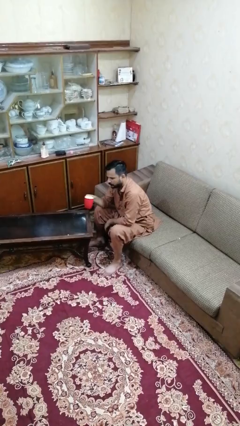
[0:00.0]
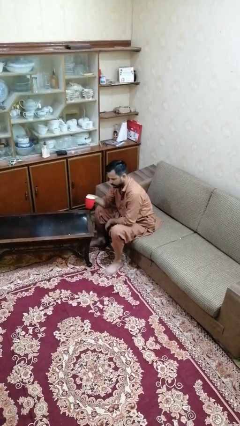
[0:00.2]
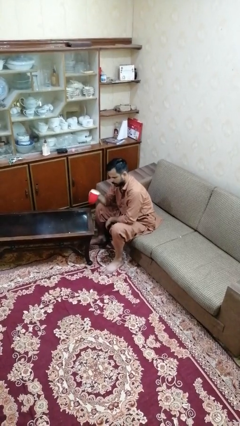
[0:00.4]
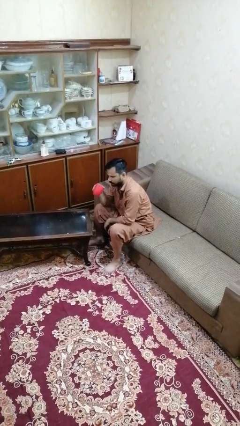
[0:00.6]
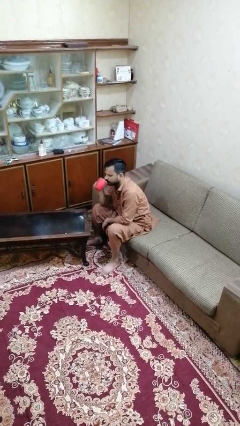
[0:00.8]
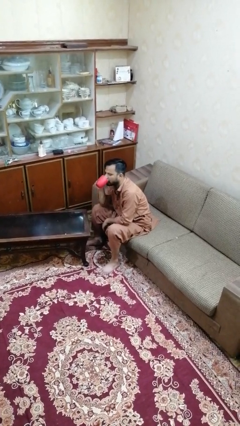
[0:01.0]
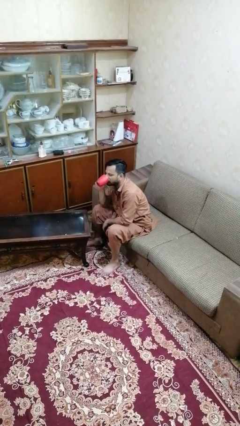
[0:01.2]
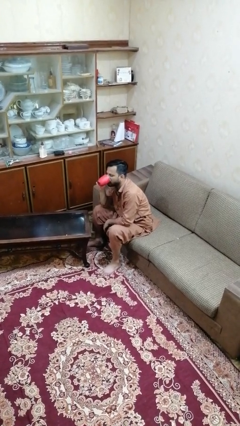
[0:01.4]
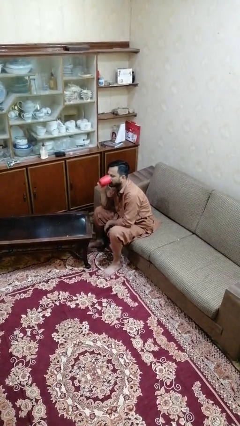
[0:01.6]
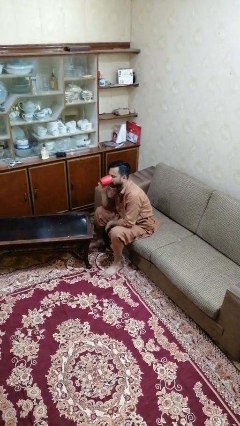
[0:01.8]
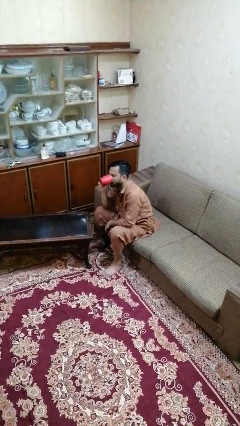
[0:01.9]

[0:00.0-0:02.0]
person drinks from mug

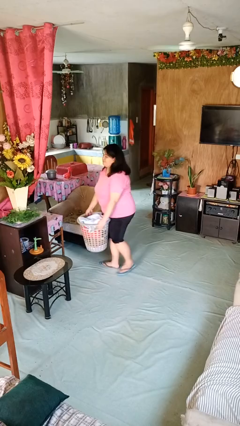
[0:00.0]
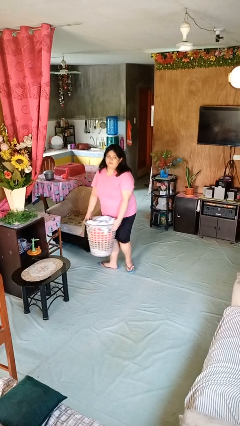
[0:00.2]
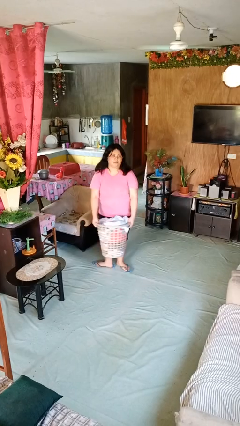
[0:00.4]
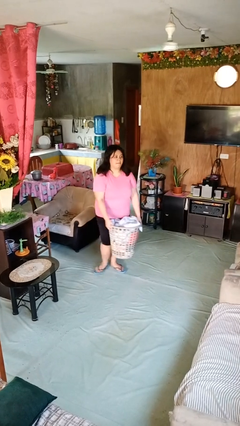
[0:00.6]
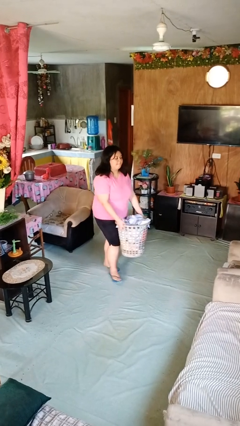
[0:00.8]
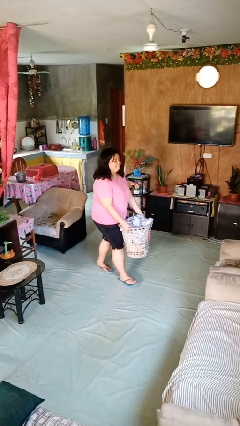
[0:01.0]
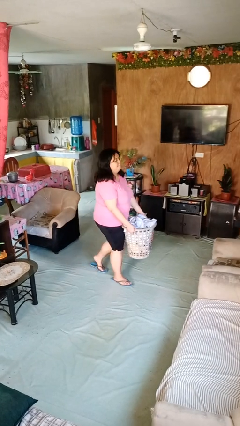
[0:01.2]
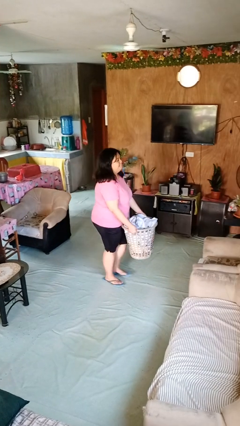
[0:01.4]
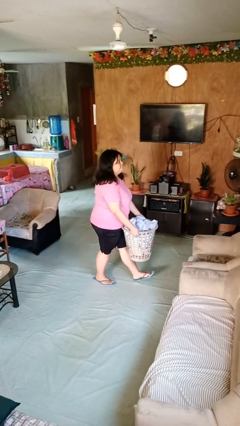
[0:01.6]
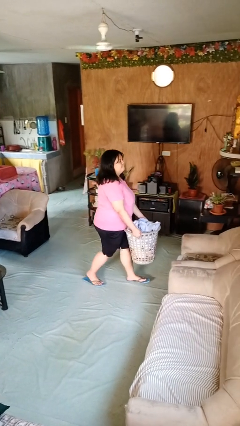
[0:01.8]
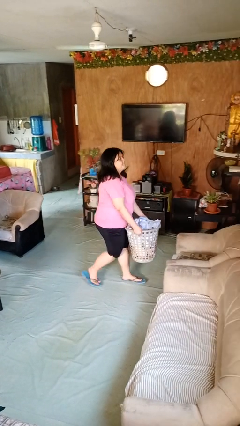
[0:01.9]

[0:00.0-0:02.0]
person carries laundry basket

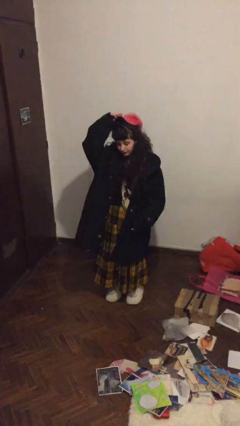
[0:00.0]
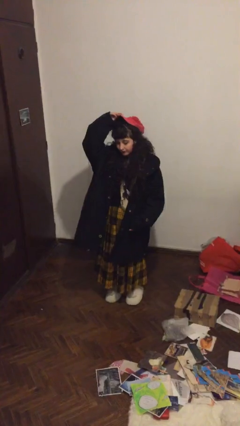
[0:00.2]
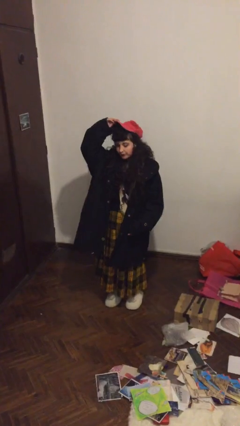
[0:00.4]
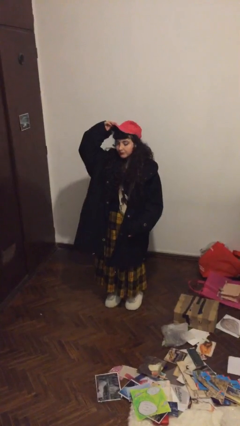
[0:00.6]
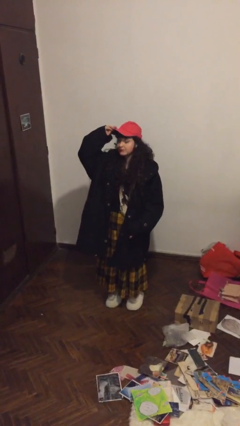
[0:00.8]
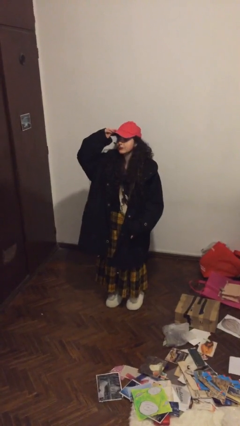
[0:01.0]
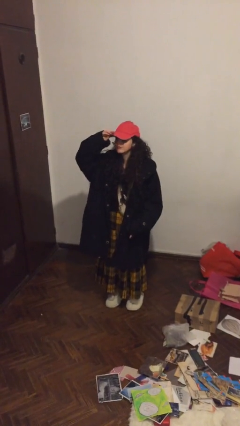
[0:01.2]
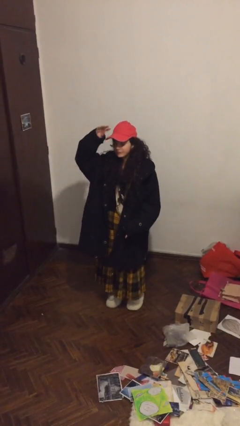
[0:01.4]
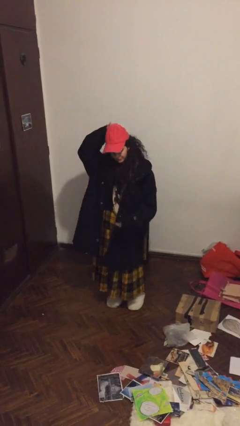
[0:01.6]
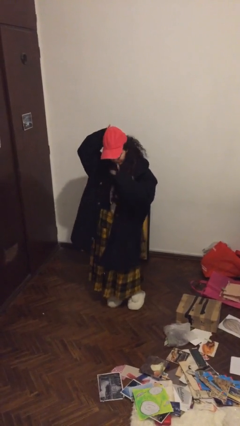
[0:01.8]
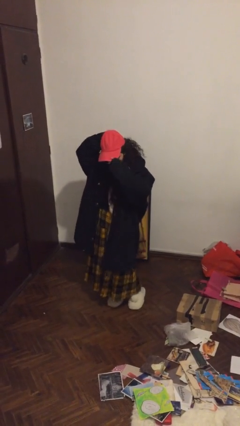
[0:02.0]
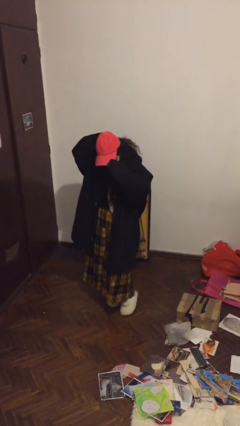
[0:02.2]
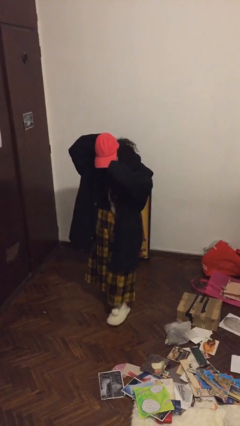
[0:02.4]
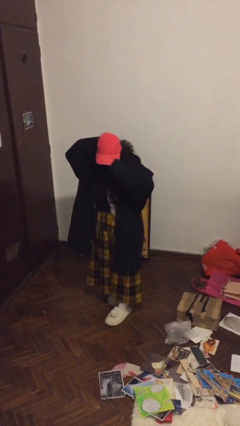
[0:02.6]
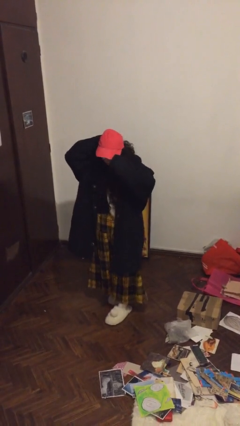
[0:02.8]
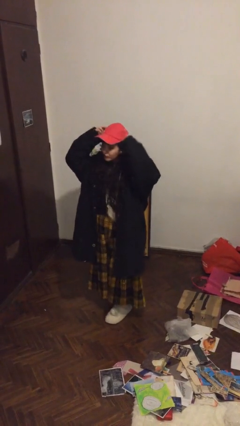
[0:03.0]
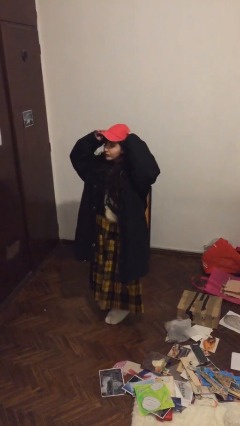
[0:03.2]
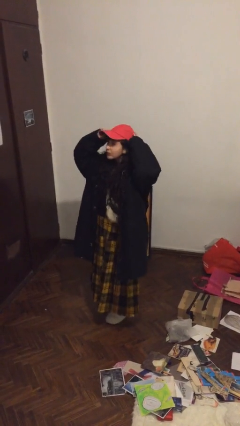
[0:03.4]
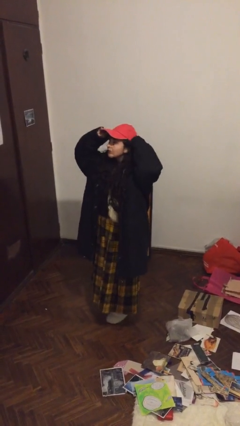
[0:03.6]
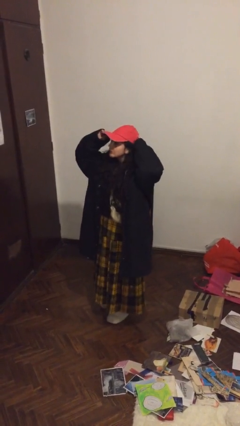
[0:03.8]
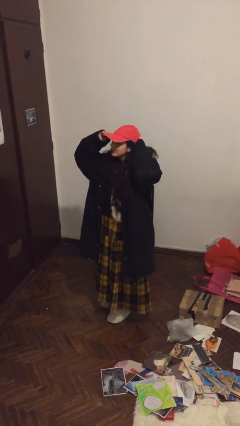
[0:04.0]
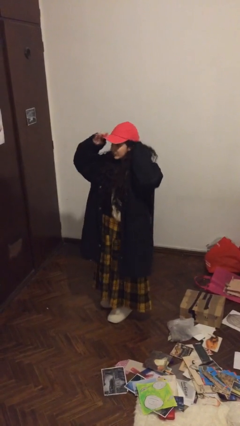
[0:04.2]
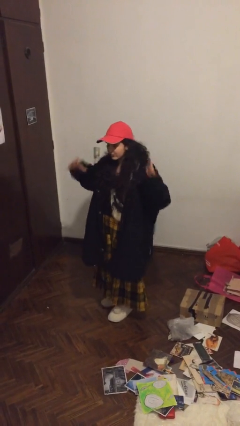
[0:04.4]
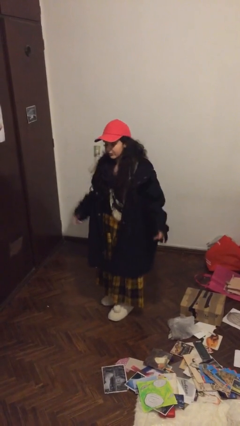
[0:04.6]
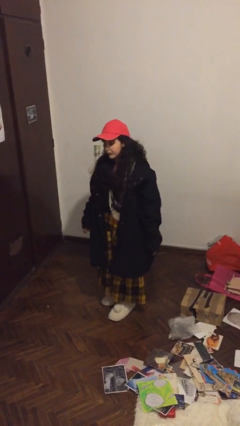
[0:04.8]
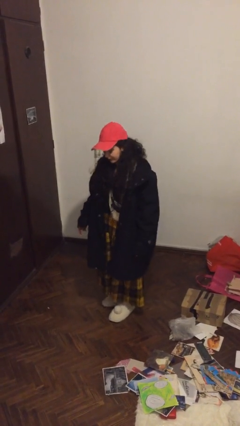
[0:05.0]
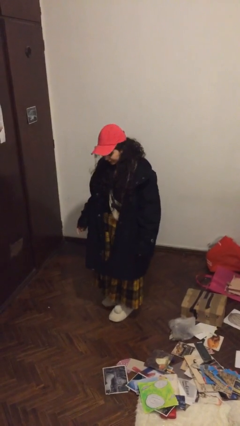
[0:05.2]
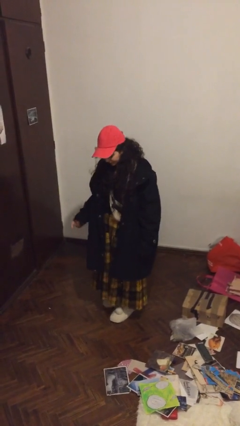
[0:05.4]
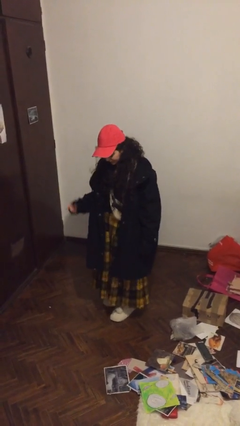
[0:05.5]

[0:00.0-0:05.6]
person puts on hat

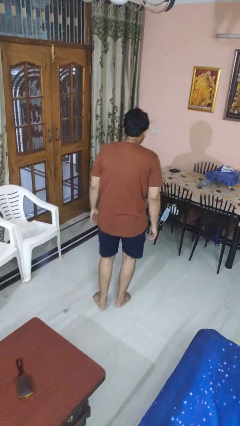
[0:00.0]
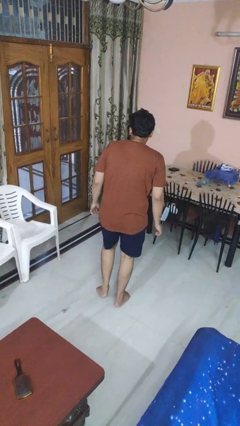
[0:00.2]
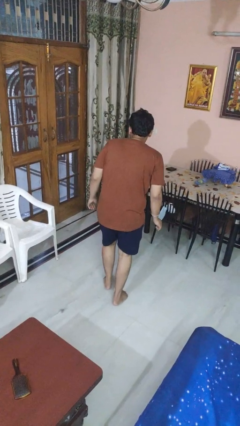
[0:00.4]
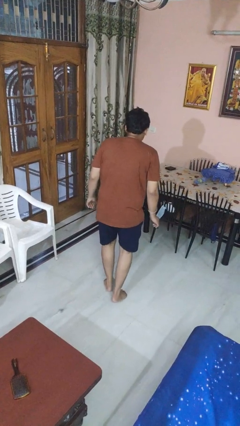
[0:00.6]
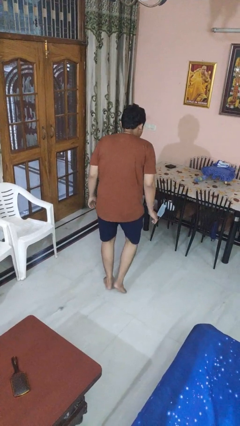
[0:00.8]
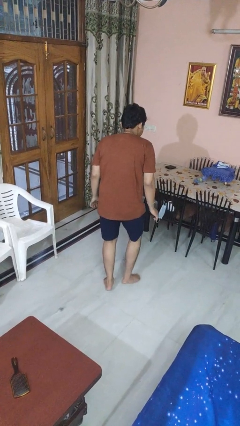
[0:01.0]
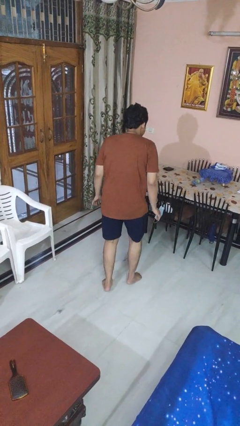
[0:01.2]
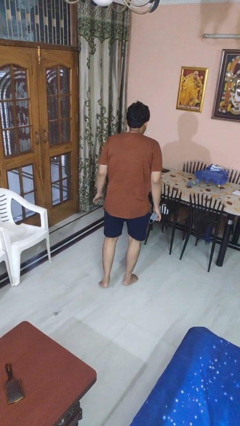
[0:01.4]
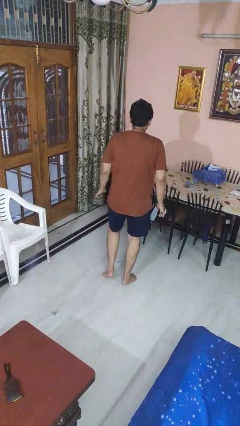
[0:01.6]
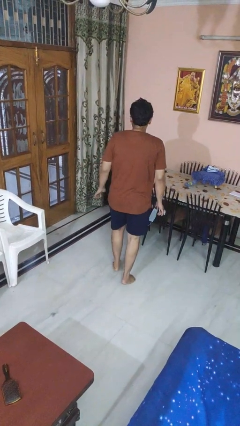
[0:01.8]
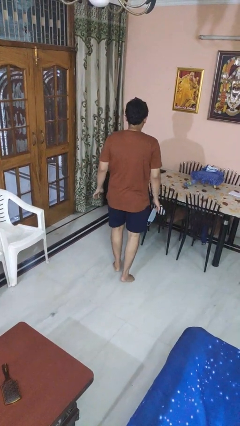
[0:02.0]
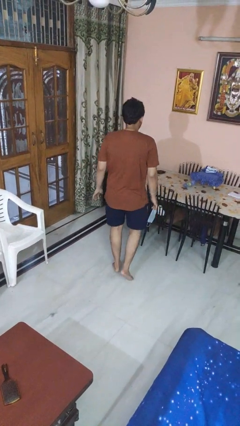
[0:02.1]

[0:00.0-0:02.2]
person walks tiptoe

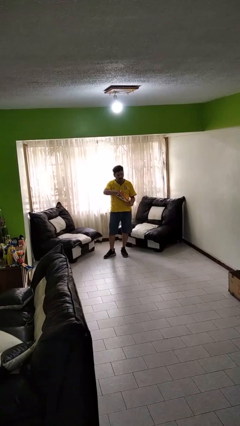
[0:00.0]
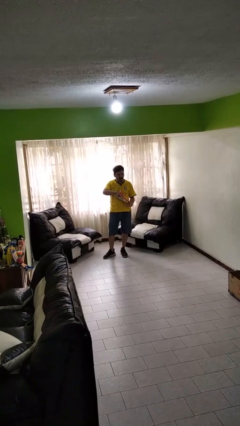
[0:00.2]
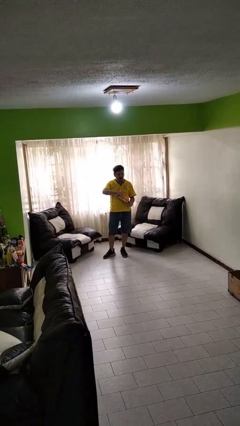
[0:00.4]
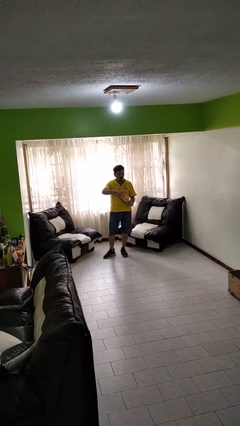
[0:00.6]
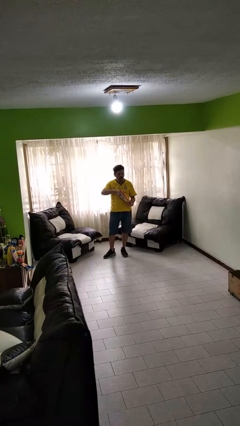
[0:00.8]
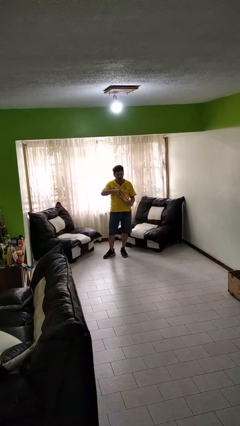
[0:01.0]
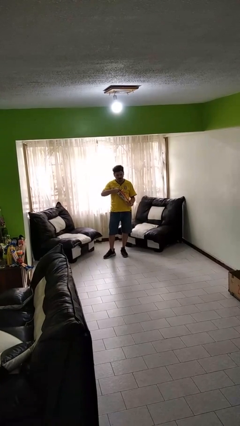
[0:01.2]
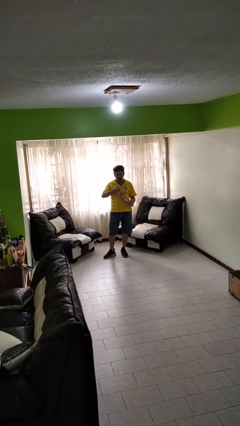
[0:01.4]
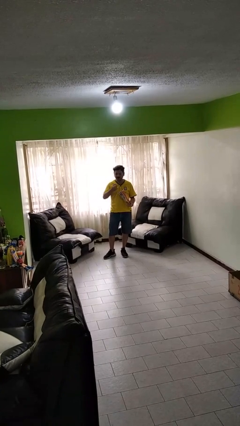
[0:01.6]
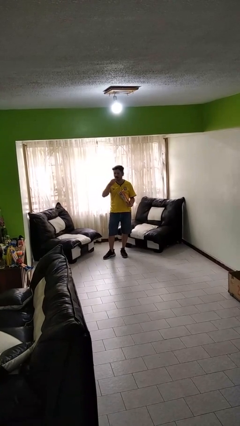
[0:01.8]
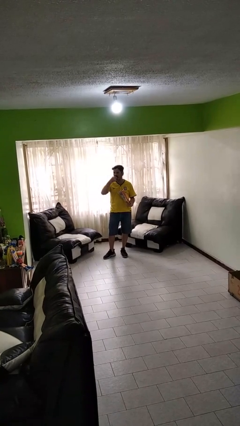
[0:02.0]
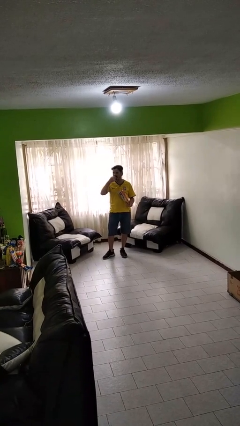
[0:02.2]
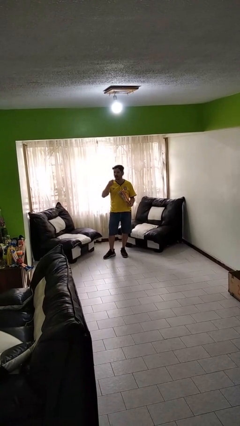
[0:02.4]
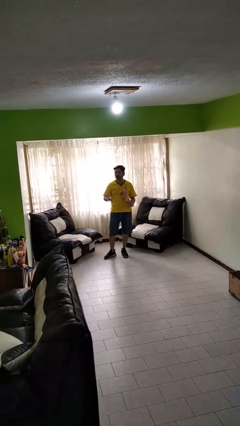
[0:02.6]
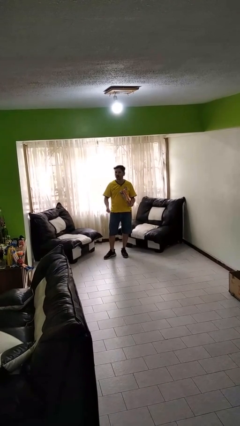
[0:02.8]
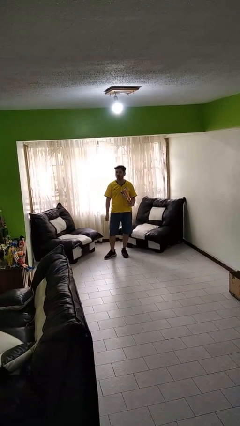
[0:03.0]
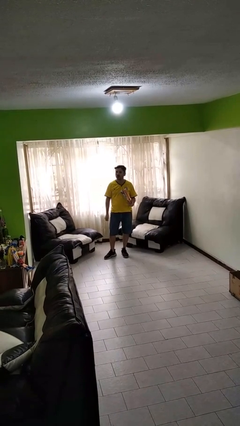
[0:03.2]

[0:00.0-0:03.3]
person eats snack from bag

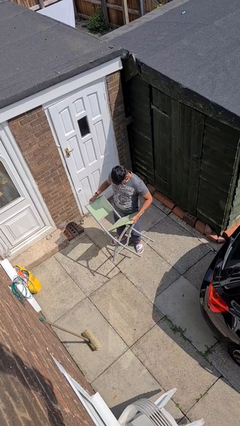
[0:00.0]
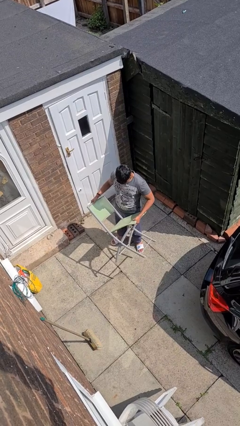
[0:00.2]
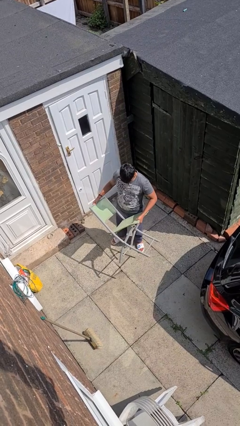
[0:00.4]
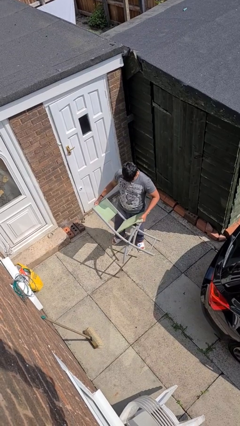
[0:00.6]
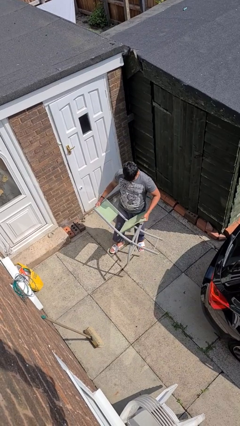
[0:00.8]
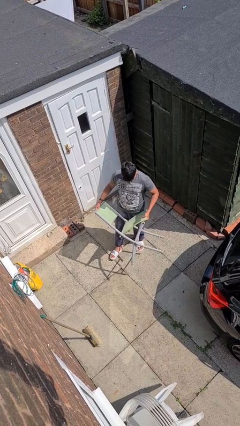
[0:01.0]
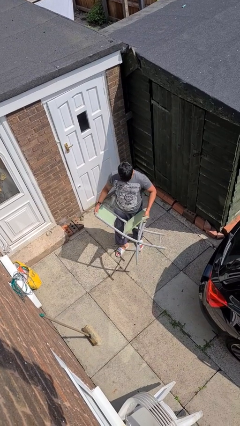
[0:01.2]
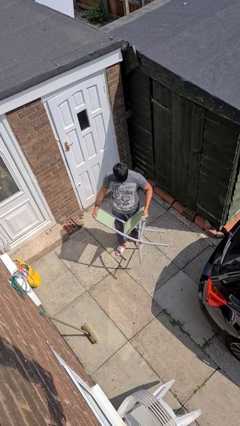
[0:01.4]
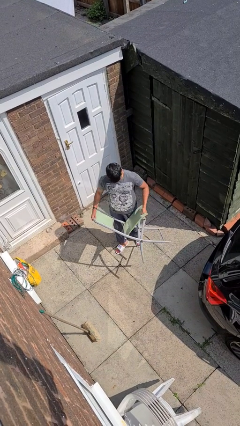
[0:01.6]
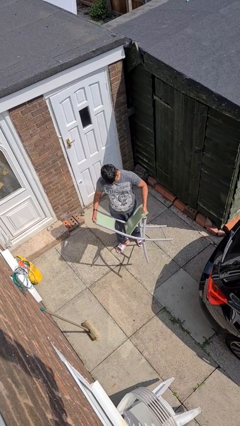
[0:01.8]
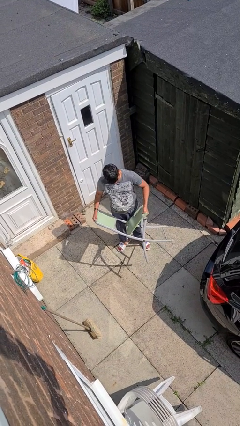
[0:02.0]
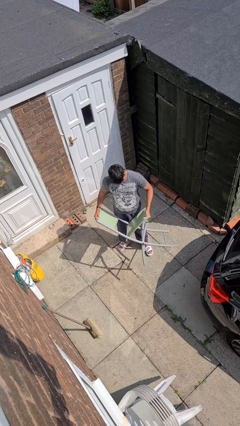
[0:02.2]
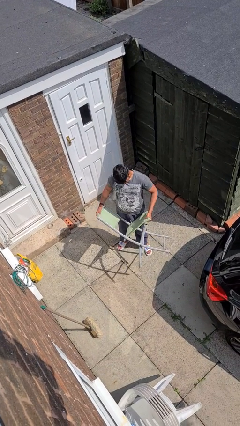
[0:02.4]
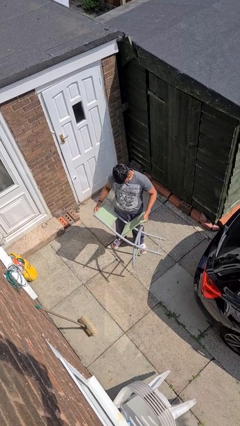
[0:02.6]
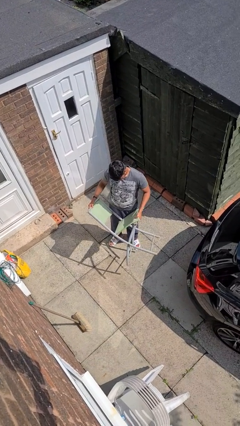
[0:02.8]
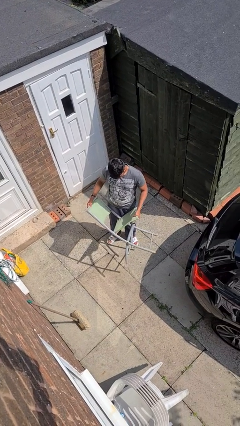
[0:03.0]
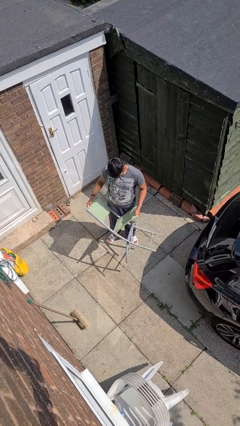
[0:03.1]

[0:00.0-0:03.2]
person carries furniture
